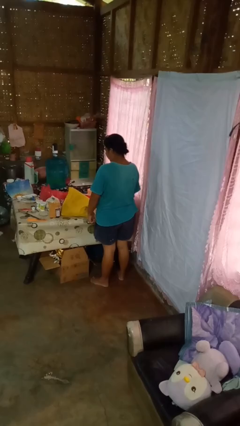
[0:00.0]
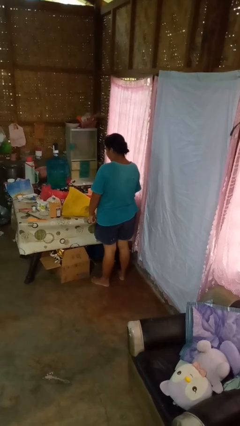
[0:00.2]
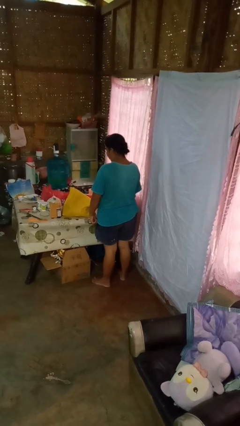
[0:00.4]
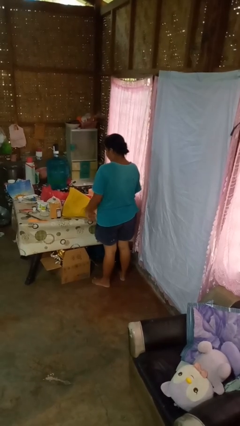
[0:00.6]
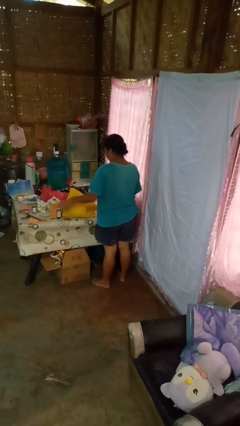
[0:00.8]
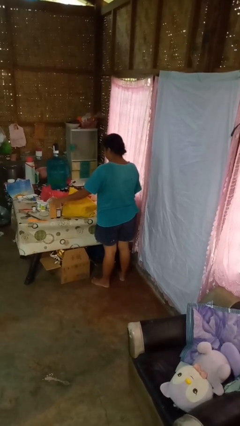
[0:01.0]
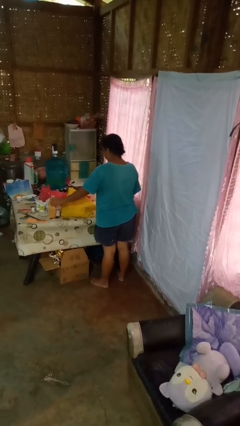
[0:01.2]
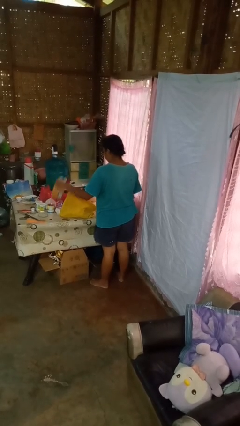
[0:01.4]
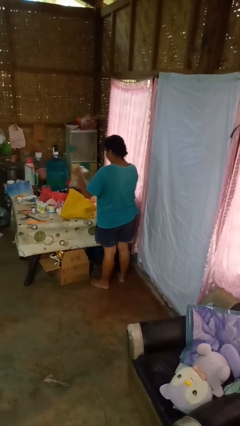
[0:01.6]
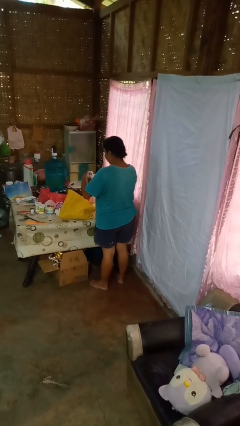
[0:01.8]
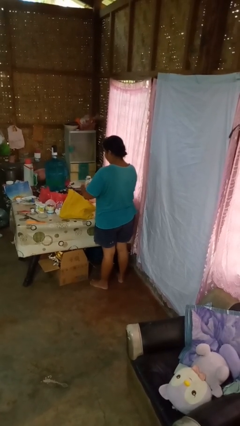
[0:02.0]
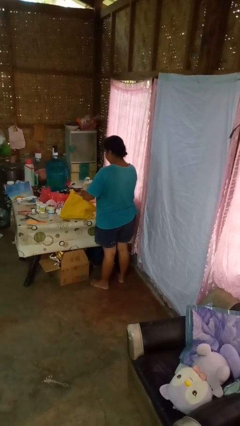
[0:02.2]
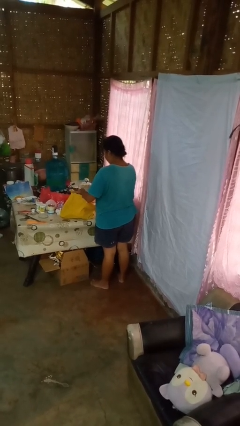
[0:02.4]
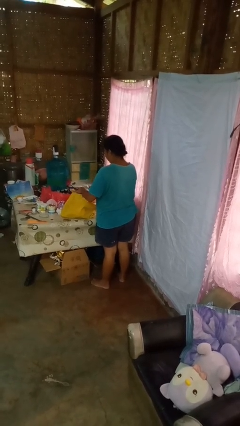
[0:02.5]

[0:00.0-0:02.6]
person puts object into bag

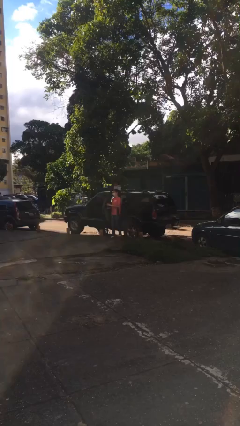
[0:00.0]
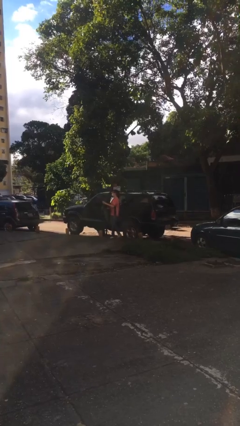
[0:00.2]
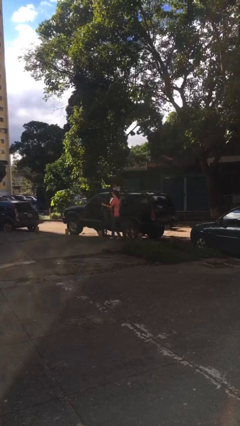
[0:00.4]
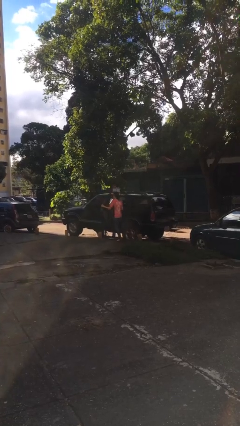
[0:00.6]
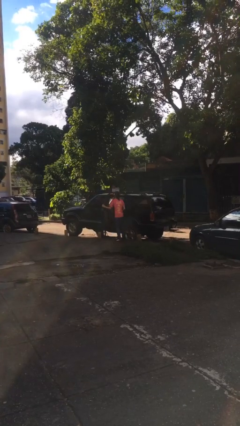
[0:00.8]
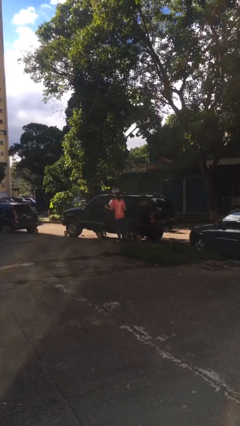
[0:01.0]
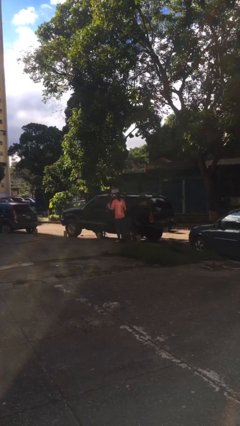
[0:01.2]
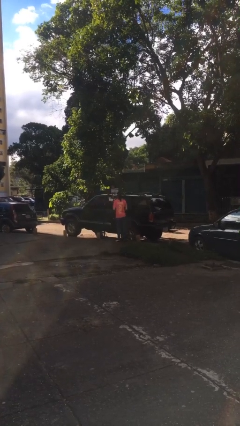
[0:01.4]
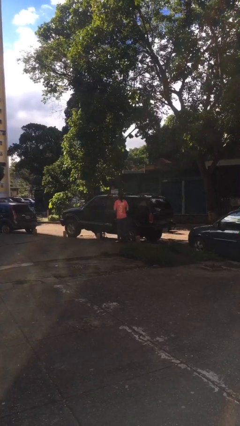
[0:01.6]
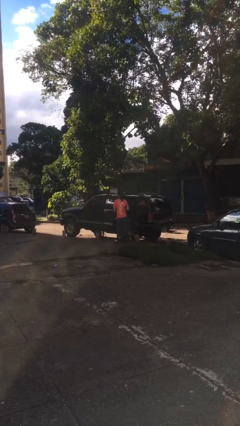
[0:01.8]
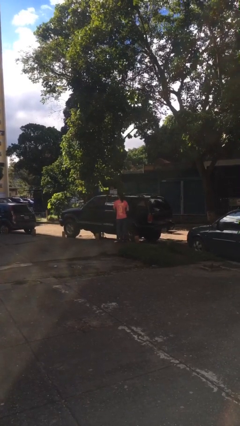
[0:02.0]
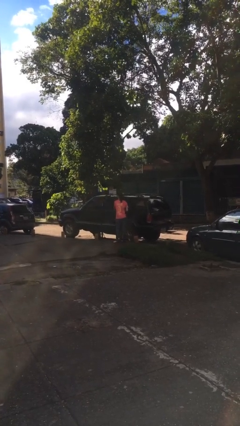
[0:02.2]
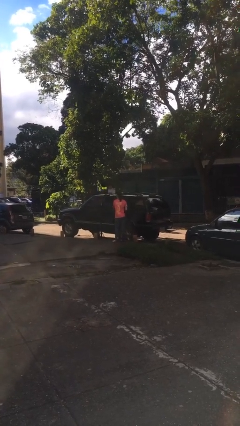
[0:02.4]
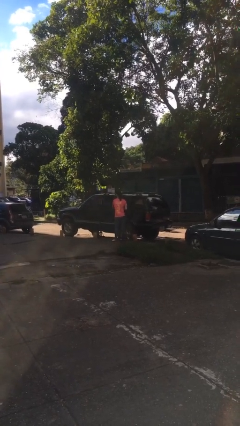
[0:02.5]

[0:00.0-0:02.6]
person closes car door

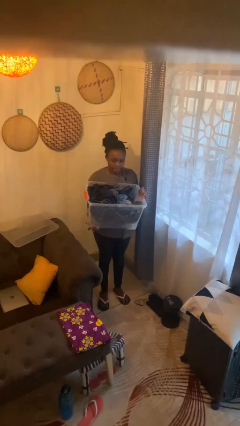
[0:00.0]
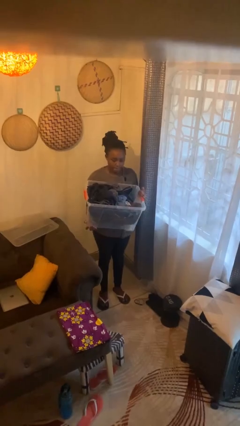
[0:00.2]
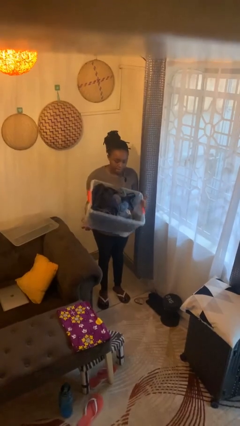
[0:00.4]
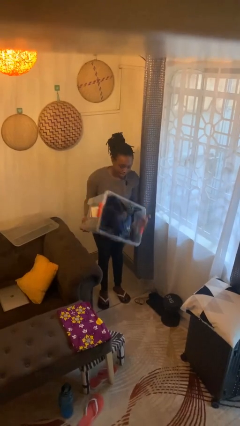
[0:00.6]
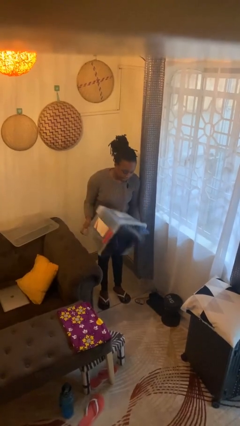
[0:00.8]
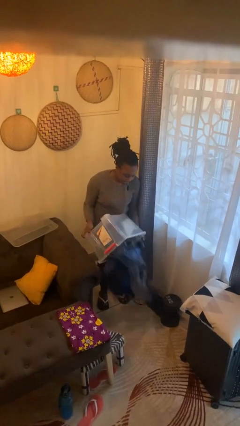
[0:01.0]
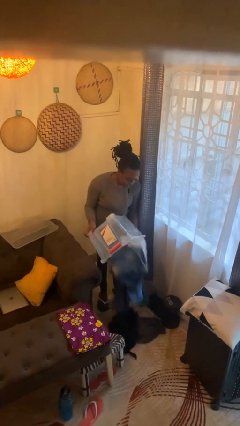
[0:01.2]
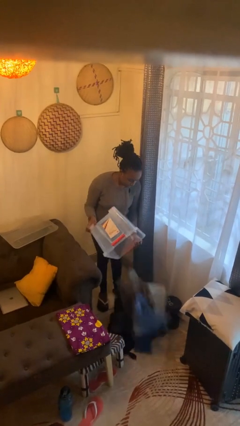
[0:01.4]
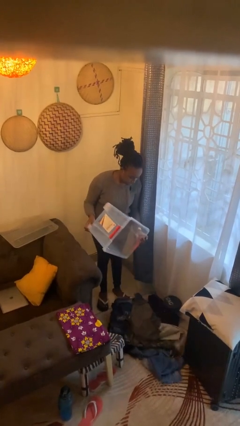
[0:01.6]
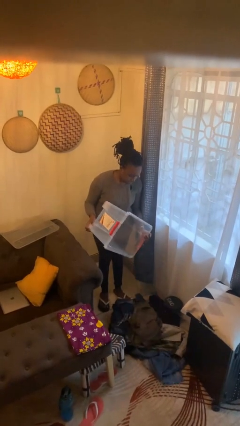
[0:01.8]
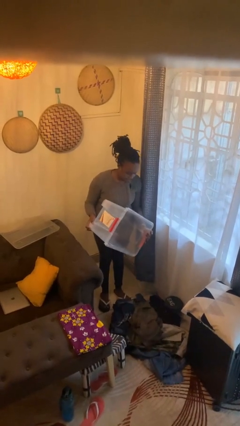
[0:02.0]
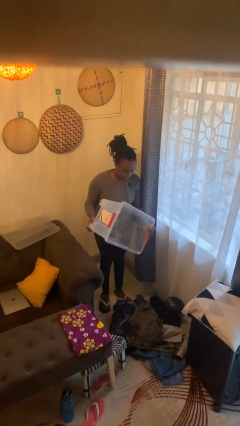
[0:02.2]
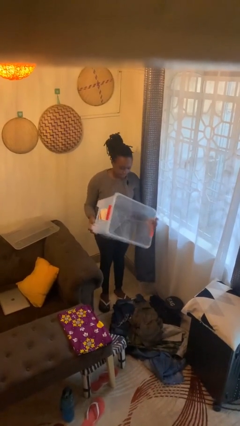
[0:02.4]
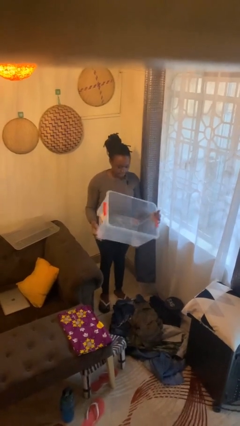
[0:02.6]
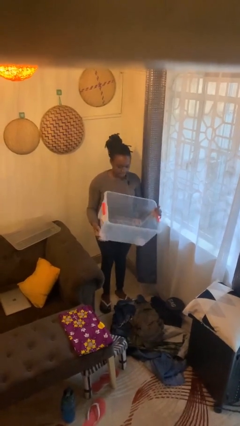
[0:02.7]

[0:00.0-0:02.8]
person unloads box onto floor

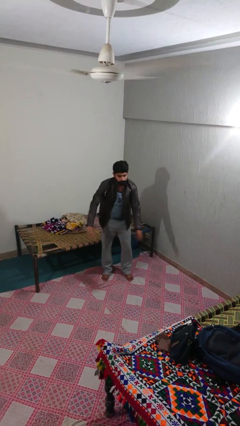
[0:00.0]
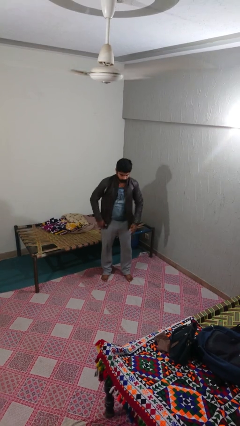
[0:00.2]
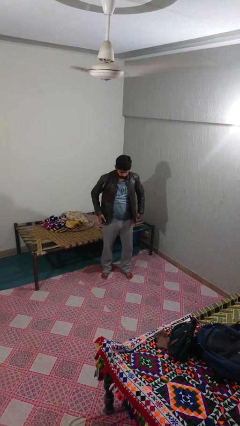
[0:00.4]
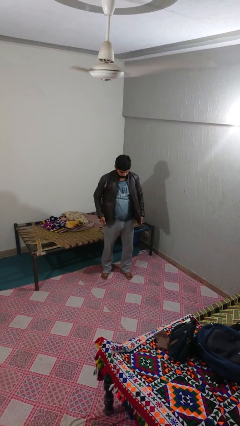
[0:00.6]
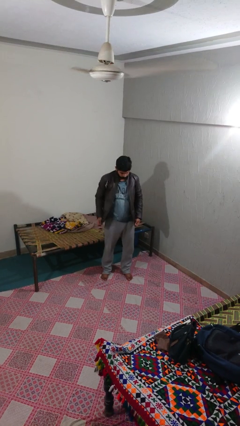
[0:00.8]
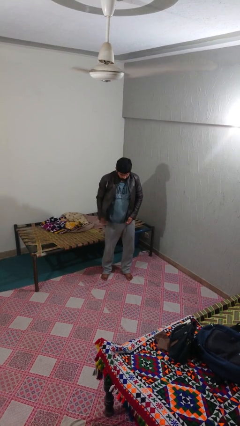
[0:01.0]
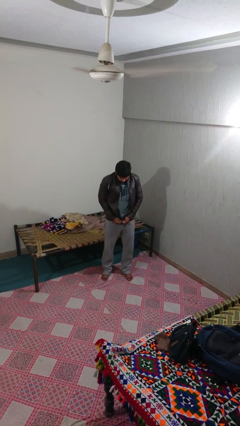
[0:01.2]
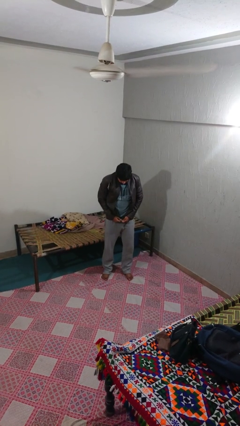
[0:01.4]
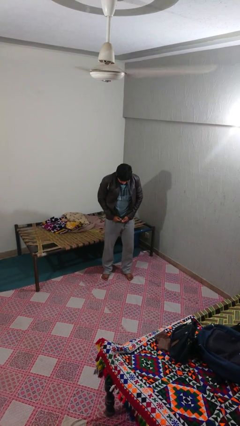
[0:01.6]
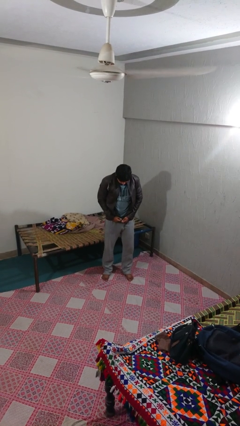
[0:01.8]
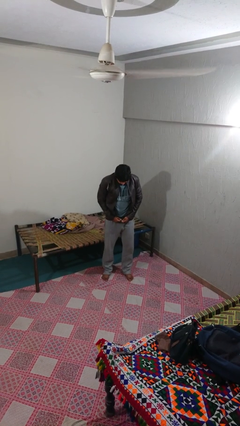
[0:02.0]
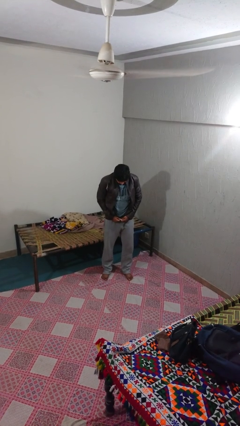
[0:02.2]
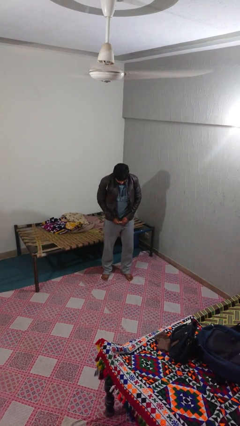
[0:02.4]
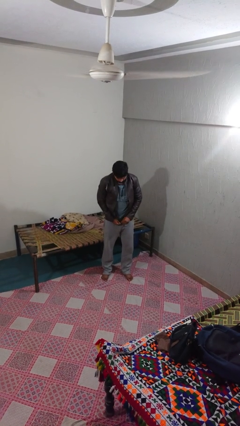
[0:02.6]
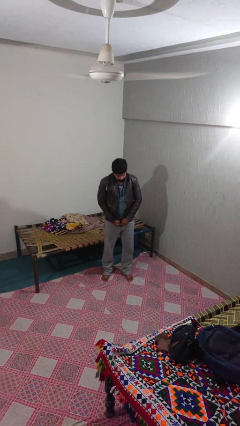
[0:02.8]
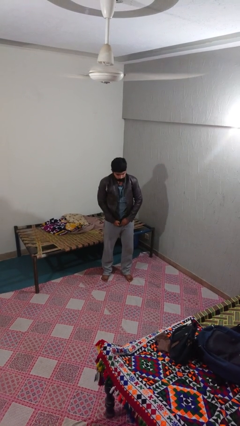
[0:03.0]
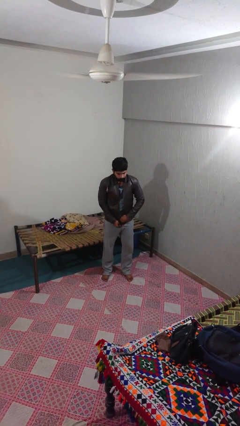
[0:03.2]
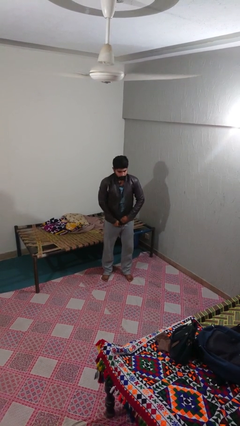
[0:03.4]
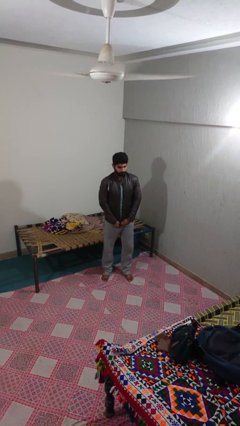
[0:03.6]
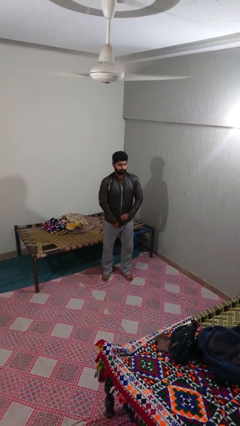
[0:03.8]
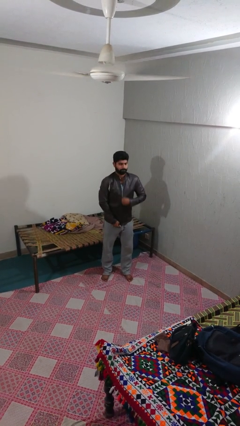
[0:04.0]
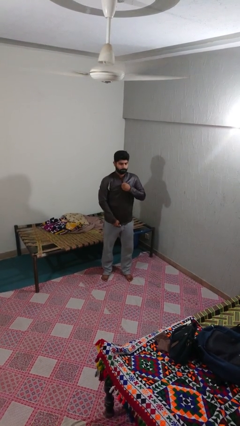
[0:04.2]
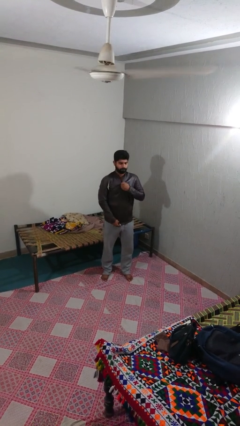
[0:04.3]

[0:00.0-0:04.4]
person zips up jacket

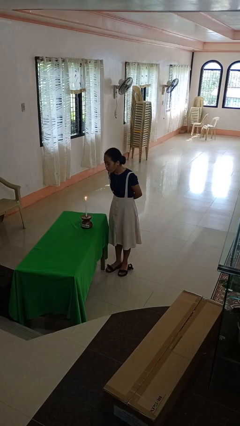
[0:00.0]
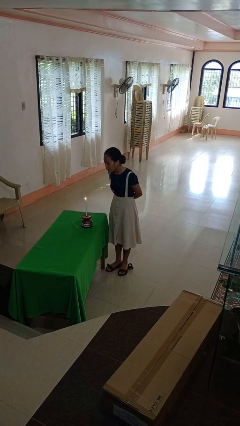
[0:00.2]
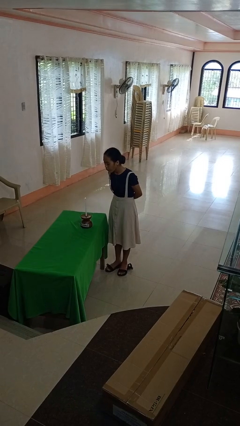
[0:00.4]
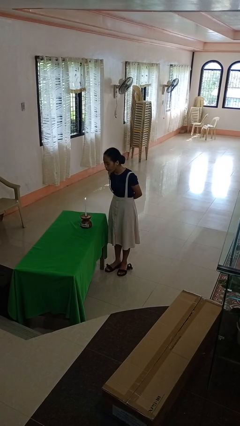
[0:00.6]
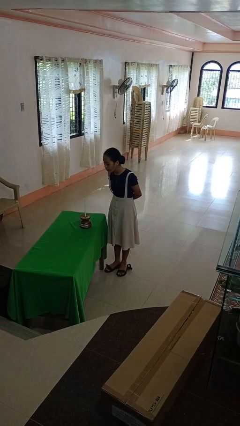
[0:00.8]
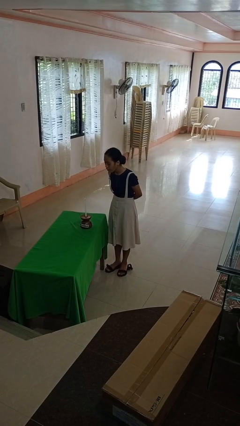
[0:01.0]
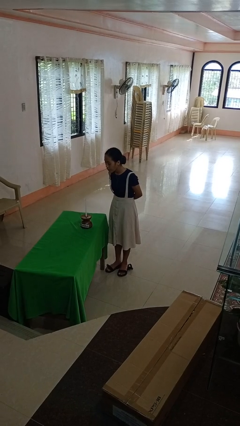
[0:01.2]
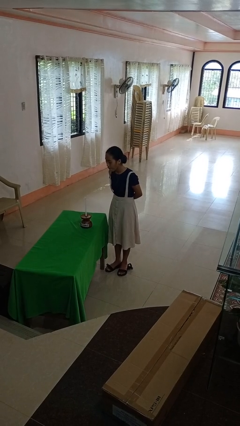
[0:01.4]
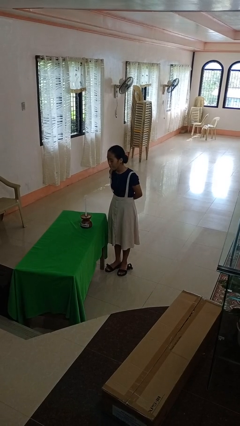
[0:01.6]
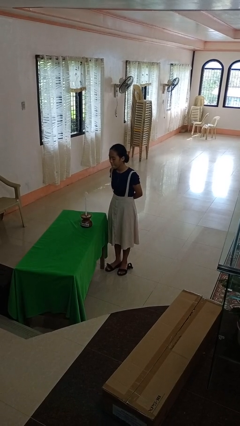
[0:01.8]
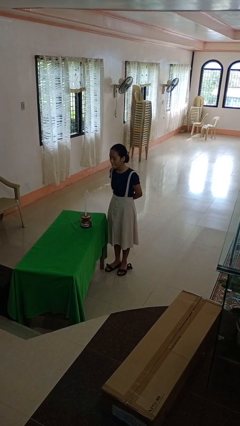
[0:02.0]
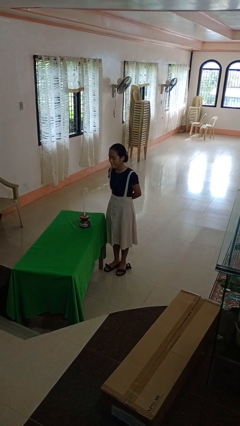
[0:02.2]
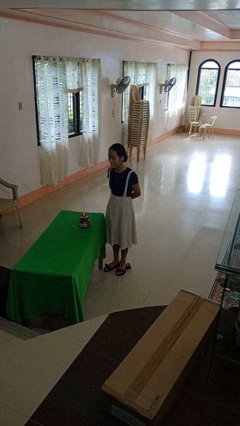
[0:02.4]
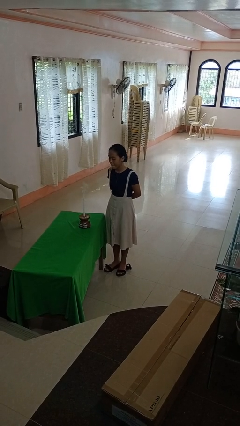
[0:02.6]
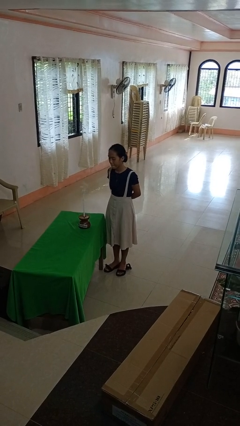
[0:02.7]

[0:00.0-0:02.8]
person extinguishes candle

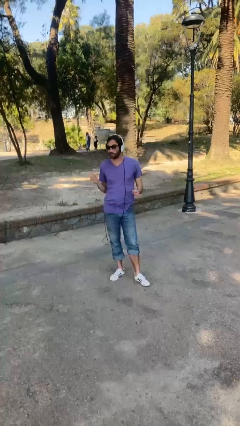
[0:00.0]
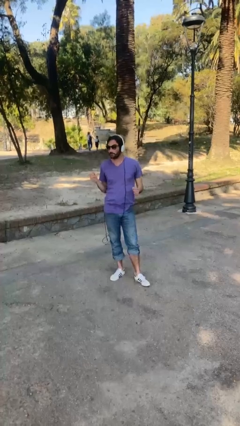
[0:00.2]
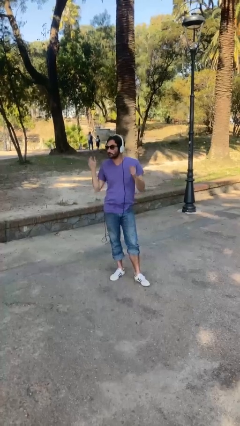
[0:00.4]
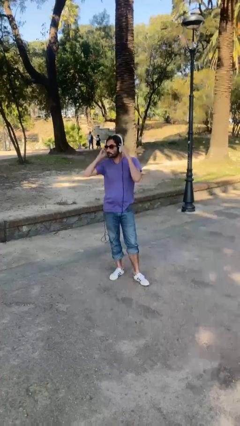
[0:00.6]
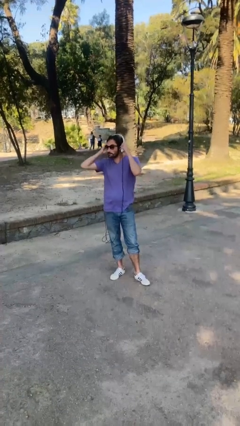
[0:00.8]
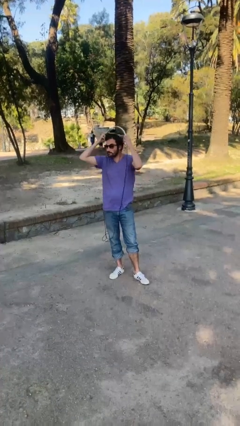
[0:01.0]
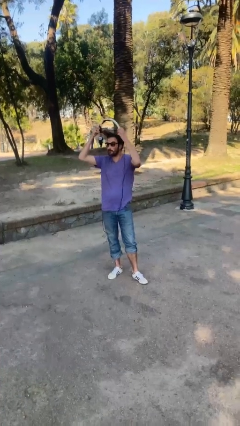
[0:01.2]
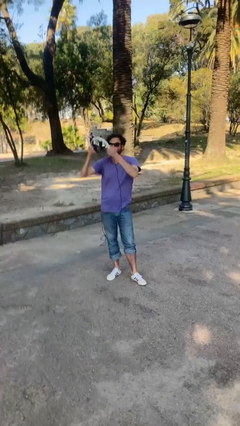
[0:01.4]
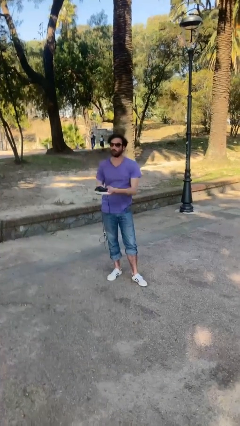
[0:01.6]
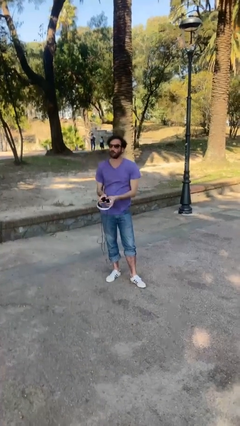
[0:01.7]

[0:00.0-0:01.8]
person takes off headphones

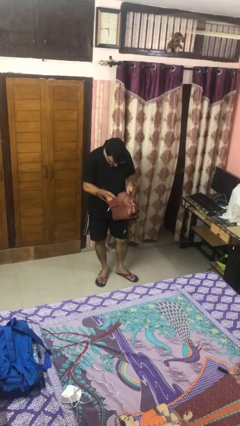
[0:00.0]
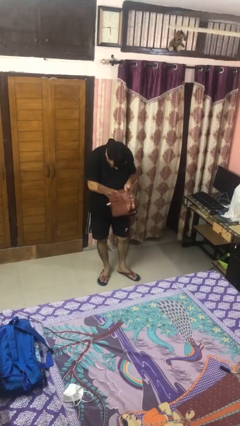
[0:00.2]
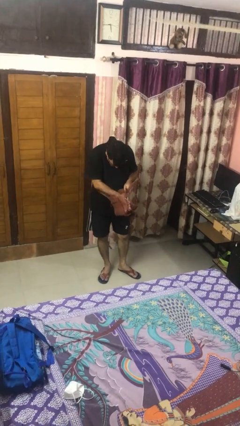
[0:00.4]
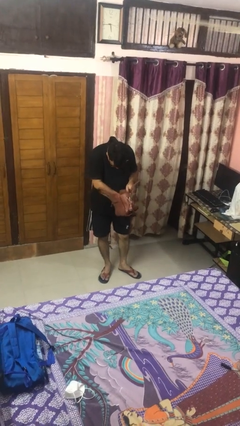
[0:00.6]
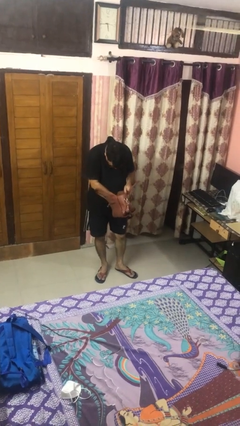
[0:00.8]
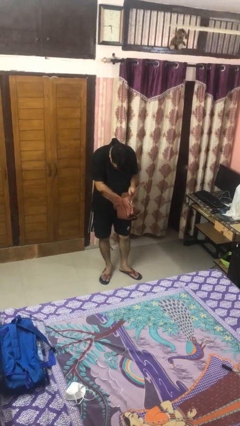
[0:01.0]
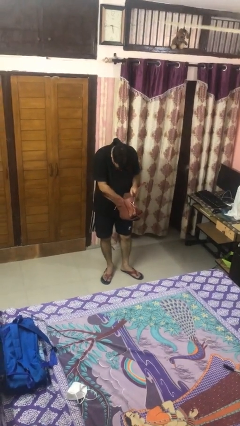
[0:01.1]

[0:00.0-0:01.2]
person searches in purse
